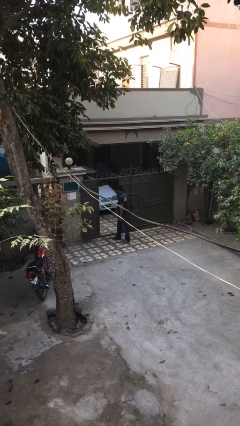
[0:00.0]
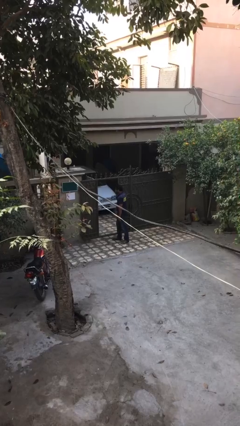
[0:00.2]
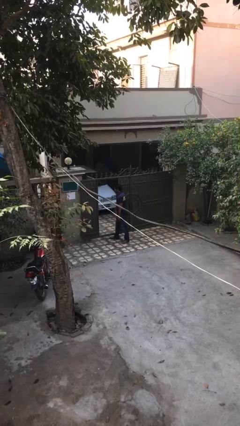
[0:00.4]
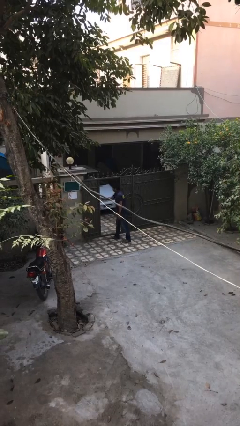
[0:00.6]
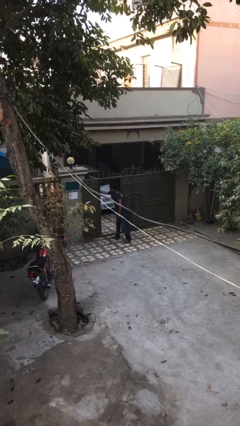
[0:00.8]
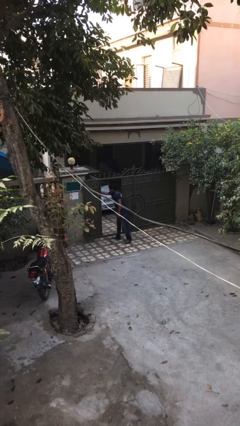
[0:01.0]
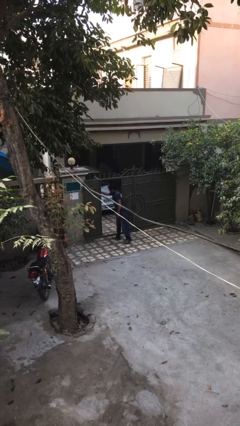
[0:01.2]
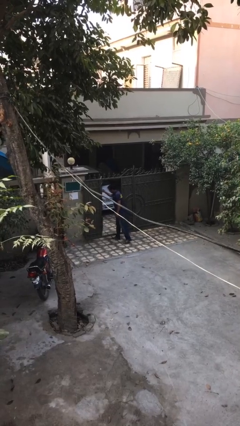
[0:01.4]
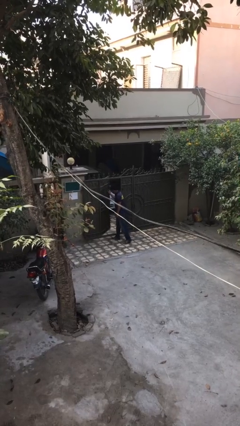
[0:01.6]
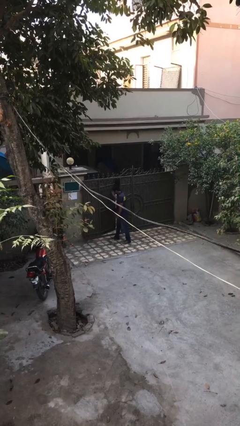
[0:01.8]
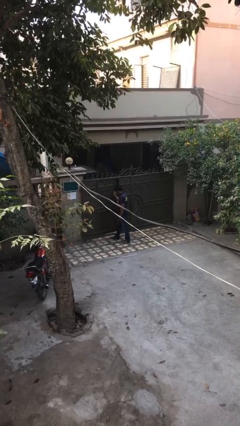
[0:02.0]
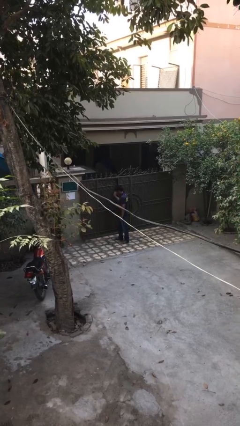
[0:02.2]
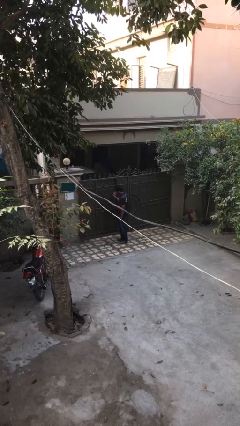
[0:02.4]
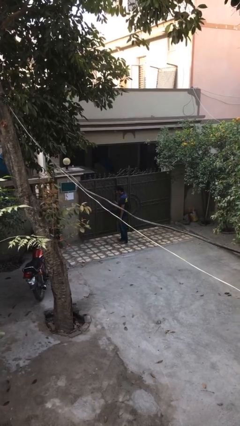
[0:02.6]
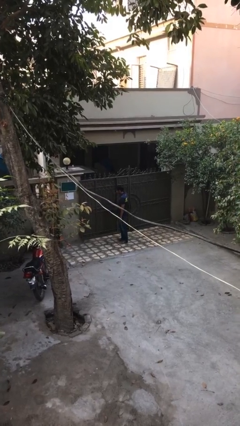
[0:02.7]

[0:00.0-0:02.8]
person closes facility door

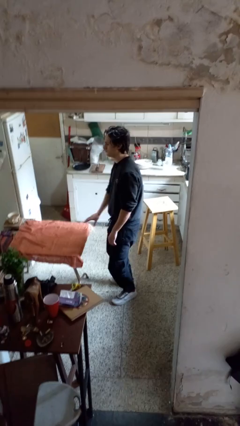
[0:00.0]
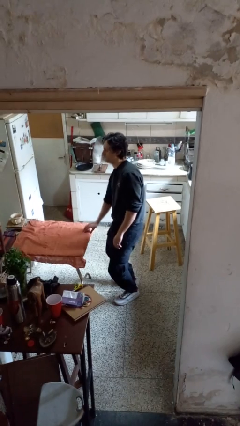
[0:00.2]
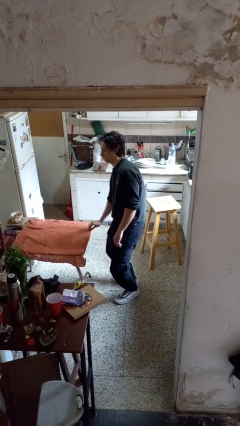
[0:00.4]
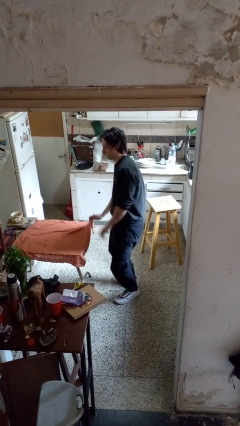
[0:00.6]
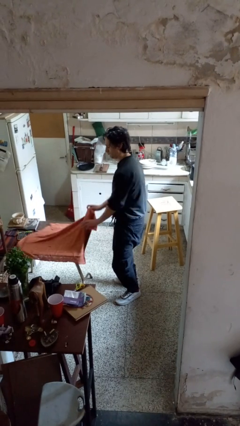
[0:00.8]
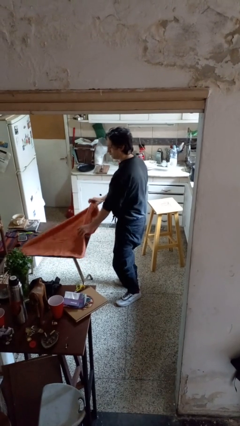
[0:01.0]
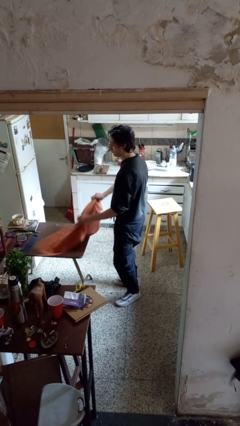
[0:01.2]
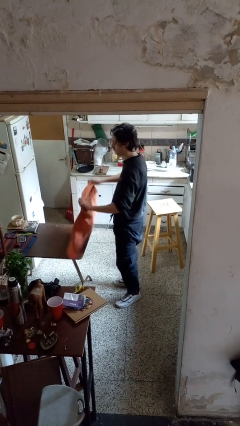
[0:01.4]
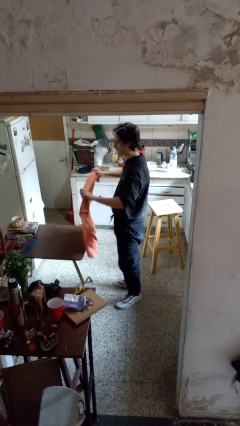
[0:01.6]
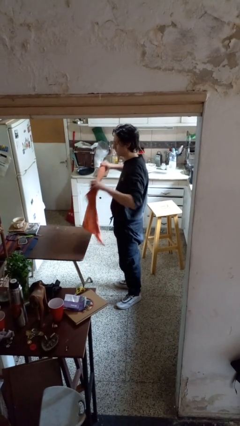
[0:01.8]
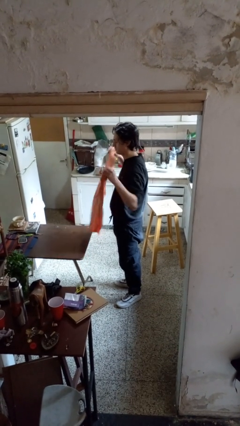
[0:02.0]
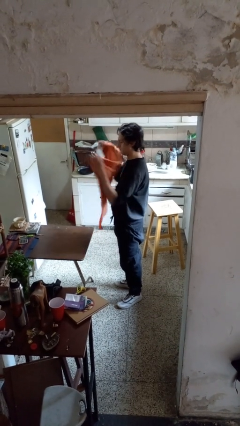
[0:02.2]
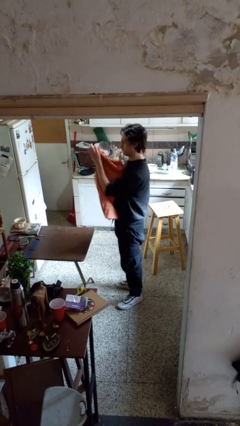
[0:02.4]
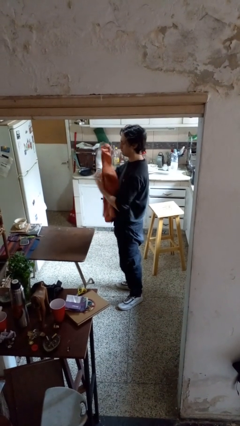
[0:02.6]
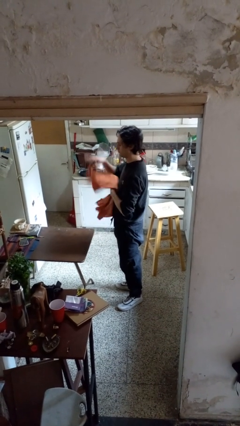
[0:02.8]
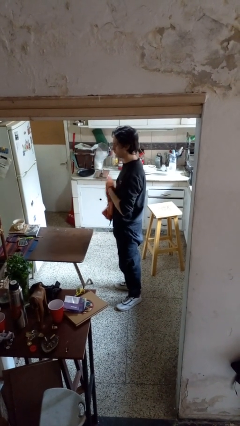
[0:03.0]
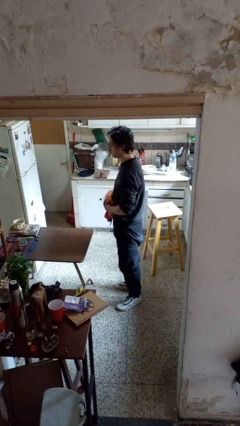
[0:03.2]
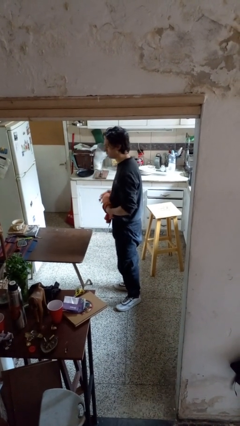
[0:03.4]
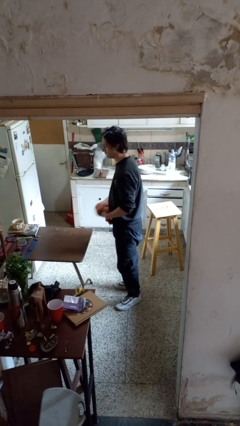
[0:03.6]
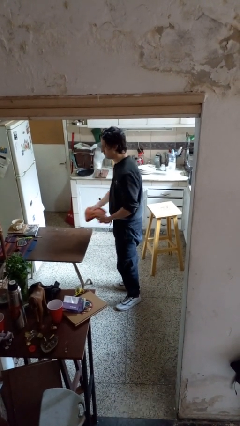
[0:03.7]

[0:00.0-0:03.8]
person folds tablecloth

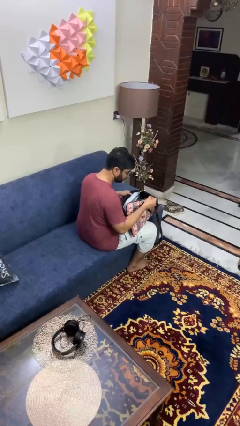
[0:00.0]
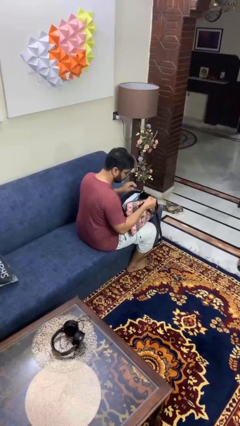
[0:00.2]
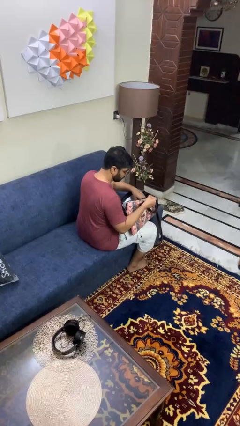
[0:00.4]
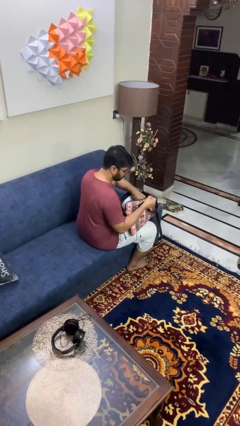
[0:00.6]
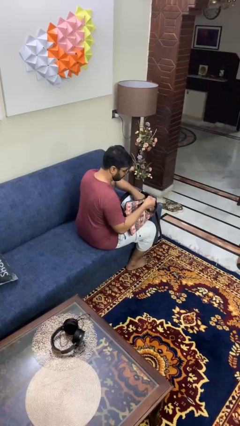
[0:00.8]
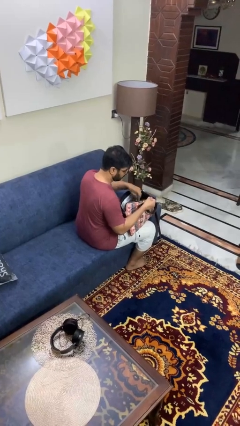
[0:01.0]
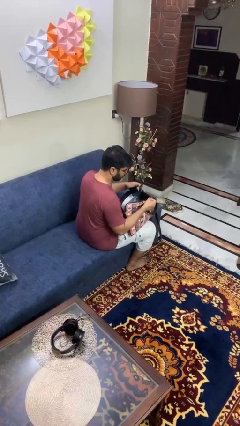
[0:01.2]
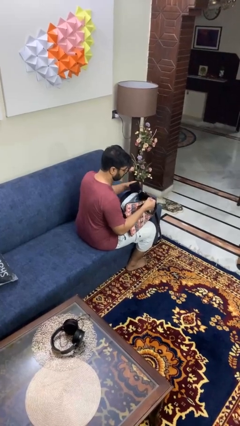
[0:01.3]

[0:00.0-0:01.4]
person takes object from purse

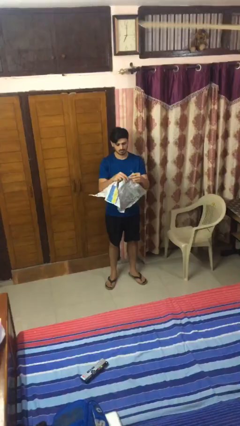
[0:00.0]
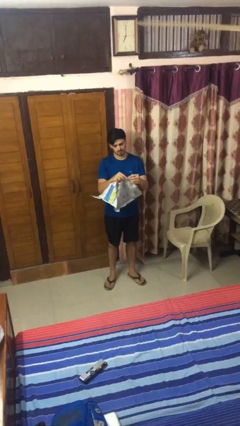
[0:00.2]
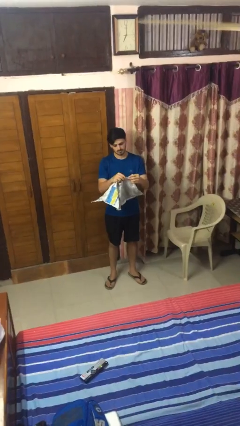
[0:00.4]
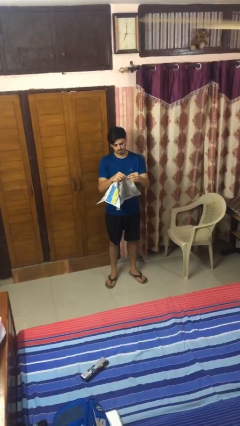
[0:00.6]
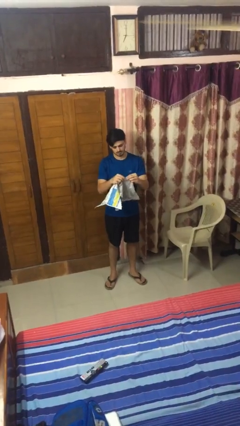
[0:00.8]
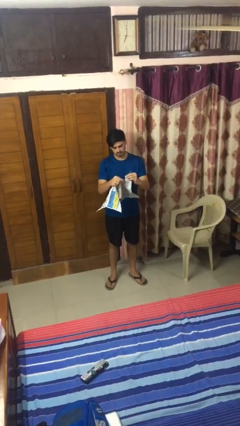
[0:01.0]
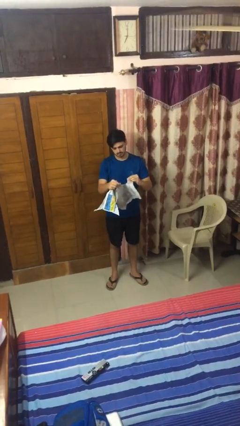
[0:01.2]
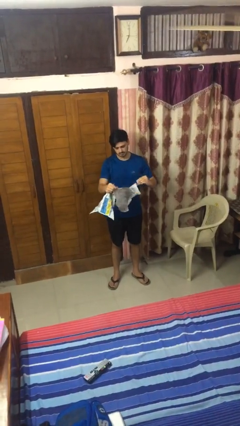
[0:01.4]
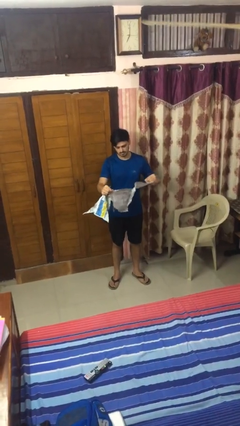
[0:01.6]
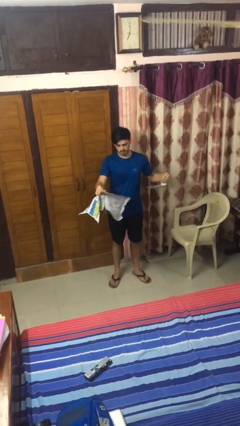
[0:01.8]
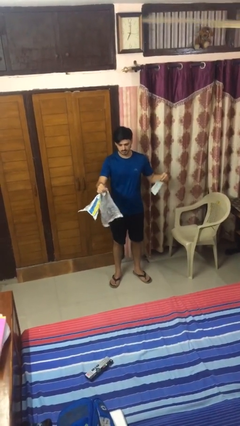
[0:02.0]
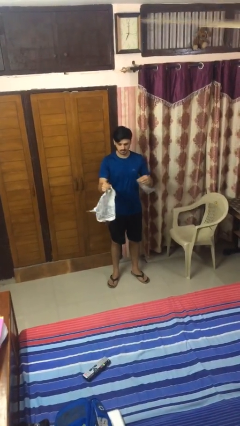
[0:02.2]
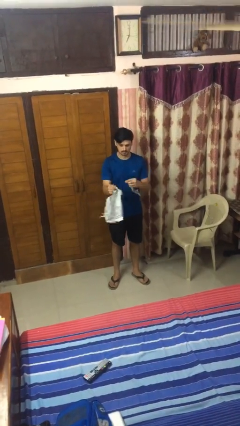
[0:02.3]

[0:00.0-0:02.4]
person tears paper

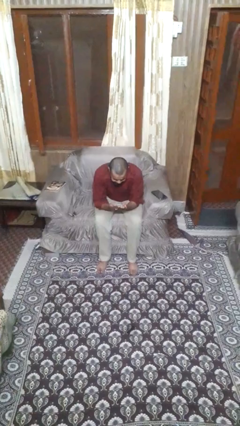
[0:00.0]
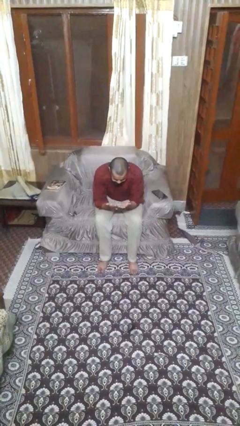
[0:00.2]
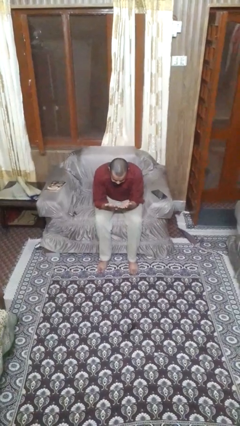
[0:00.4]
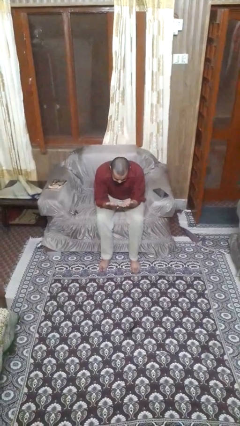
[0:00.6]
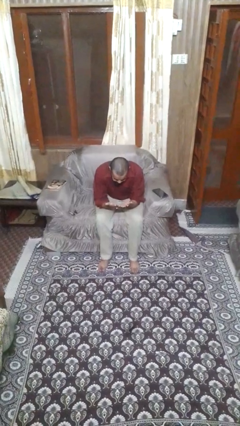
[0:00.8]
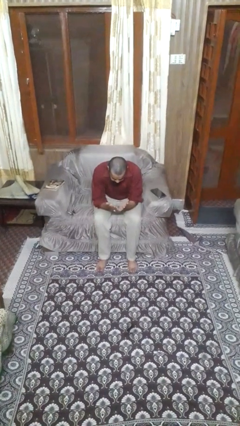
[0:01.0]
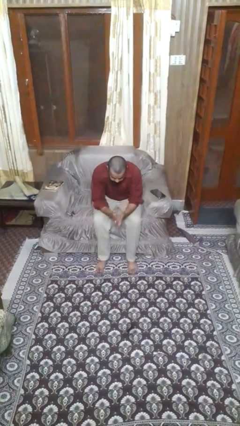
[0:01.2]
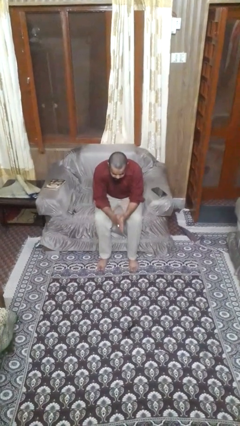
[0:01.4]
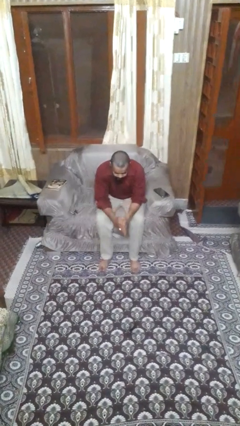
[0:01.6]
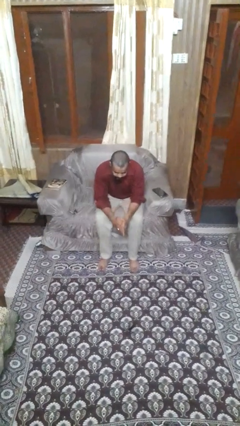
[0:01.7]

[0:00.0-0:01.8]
person looks at hands in lap

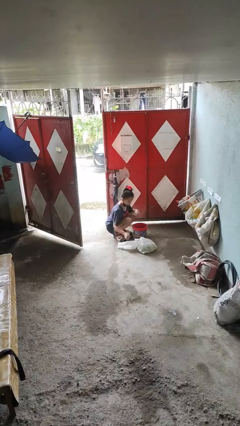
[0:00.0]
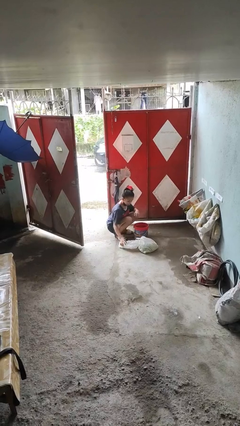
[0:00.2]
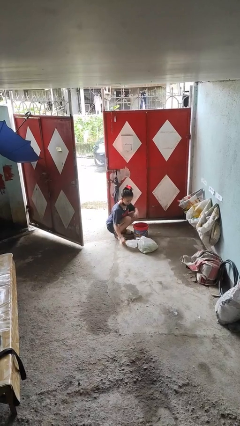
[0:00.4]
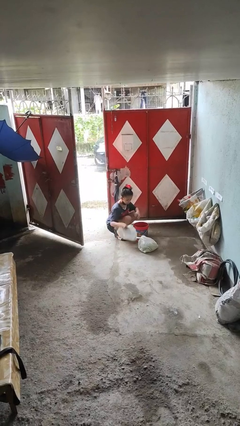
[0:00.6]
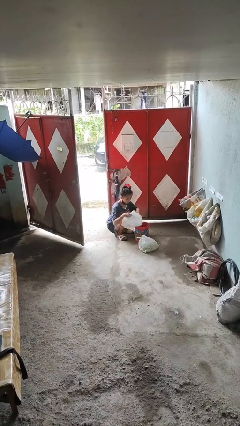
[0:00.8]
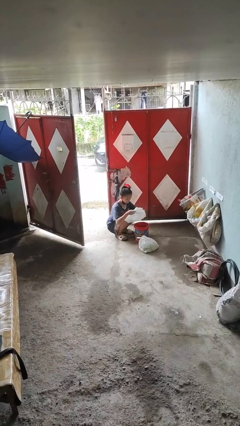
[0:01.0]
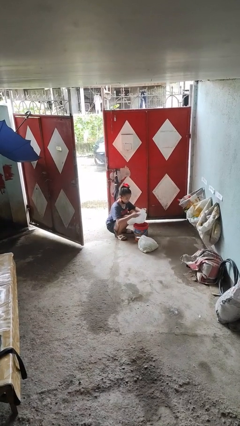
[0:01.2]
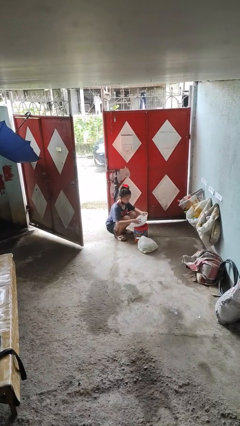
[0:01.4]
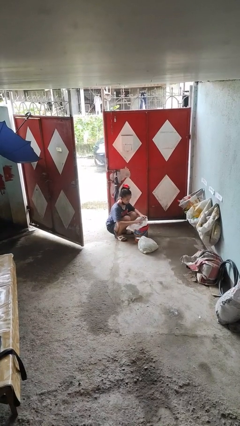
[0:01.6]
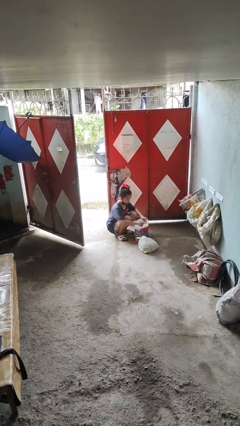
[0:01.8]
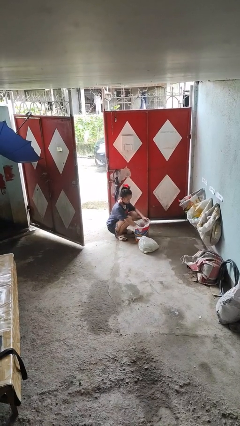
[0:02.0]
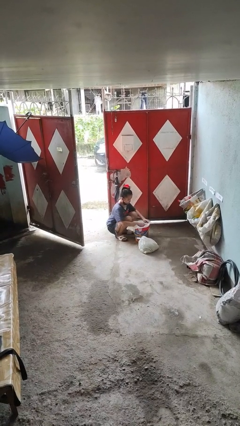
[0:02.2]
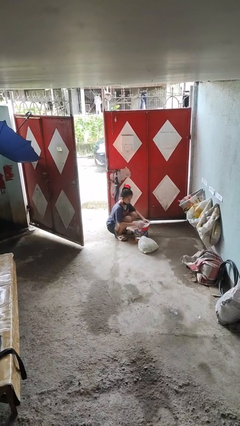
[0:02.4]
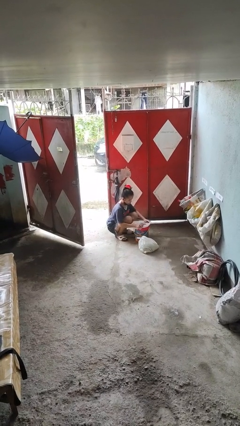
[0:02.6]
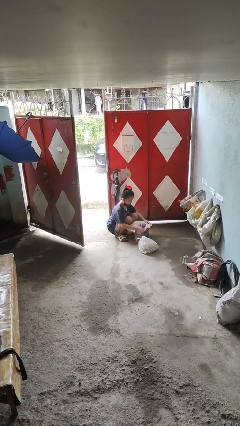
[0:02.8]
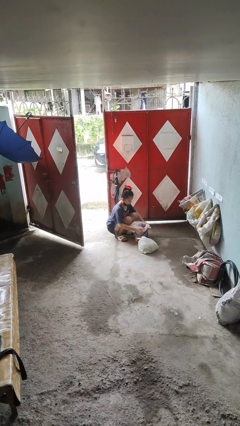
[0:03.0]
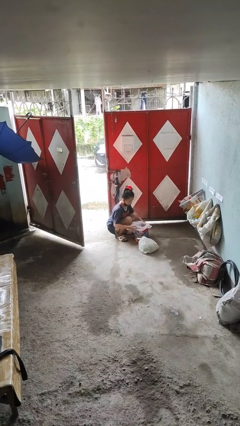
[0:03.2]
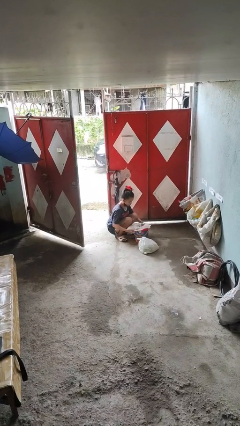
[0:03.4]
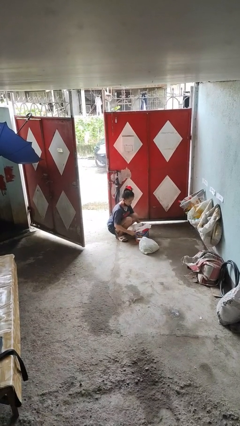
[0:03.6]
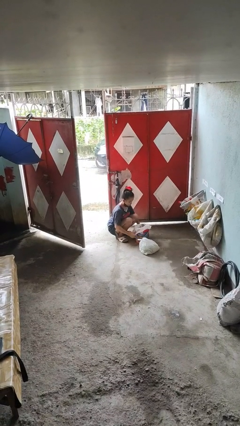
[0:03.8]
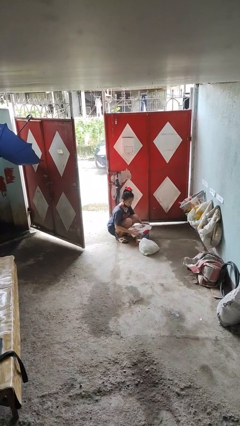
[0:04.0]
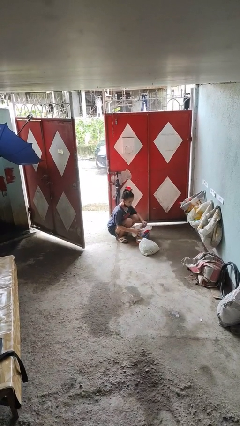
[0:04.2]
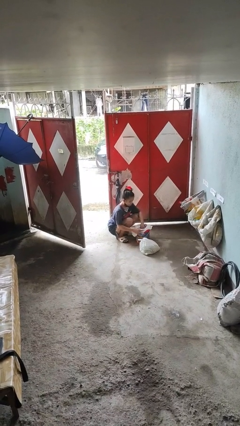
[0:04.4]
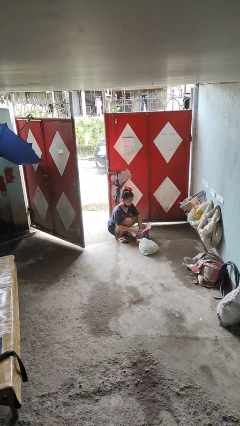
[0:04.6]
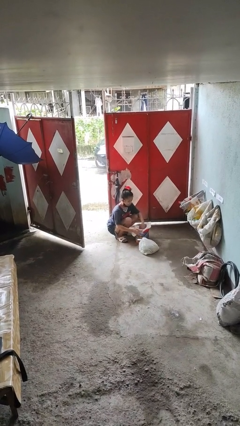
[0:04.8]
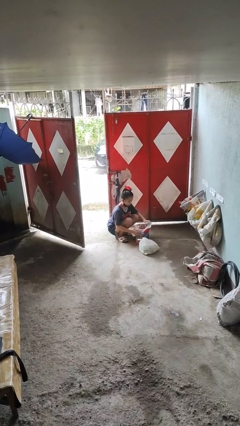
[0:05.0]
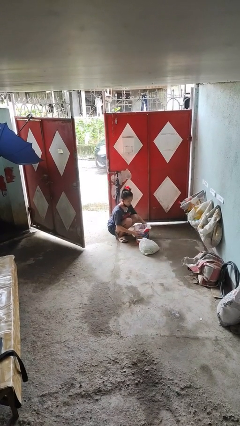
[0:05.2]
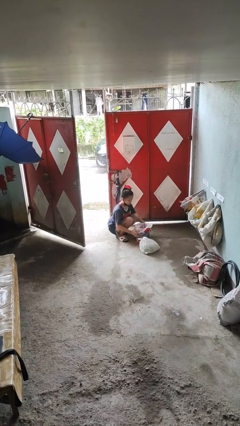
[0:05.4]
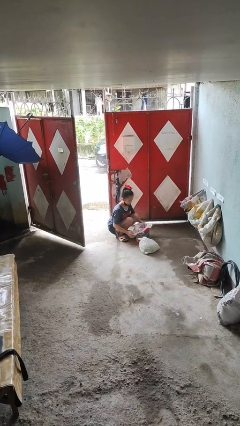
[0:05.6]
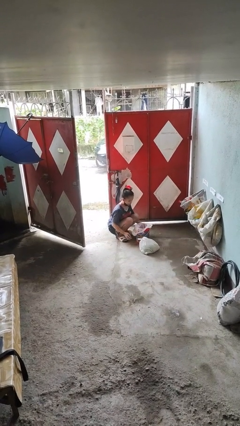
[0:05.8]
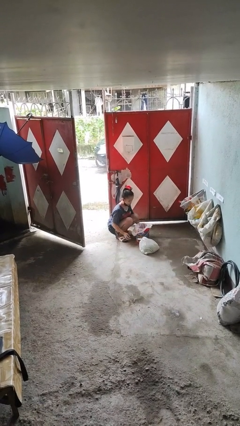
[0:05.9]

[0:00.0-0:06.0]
person inserts trashbag into trashcan
